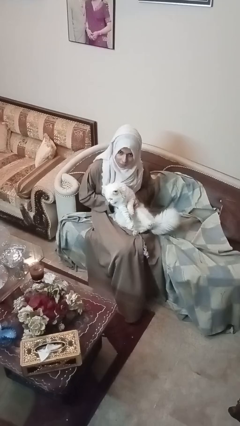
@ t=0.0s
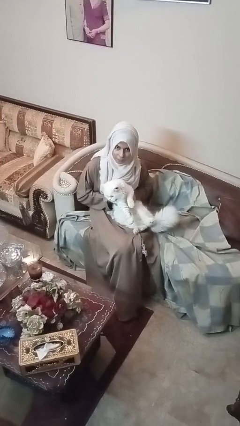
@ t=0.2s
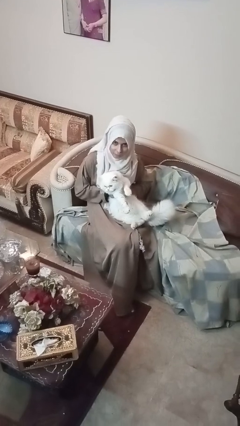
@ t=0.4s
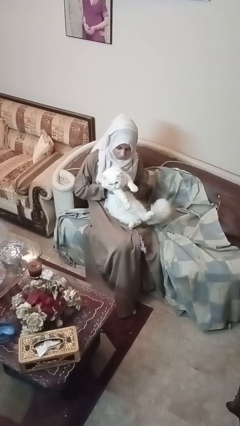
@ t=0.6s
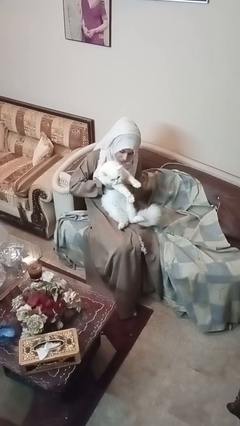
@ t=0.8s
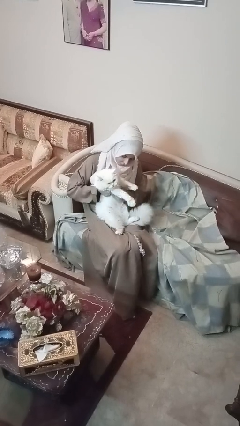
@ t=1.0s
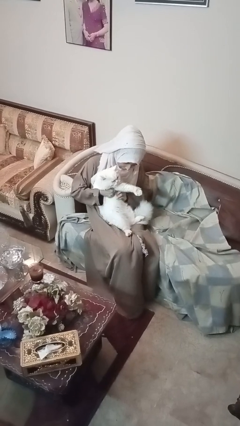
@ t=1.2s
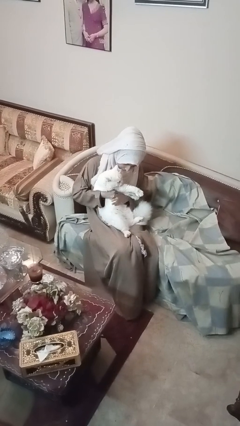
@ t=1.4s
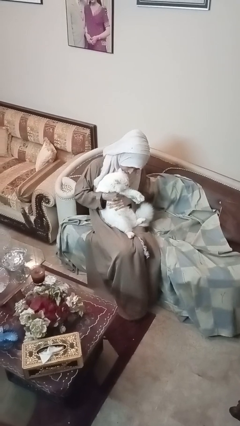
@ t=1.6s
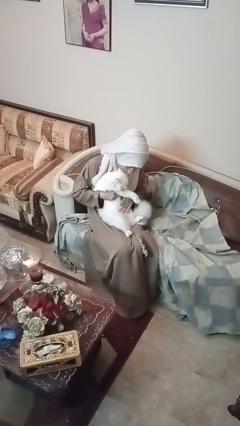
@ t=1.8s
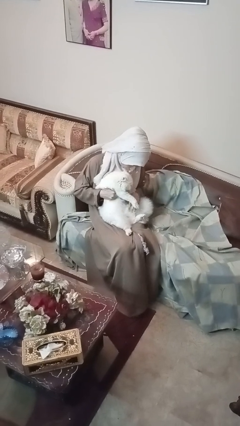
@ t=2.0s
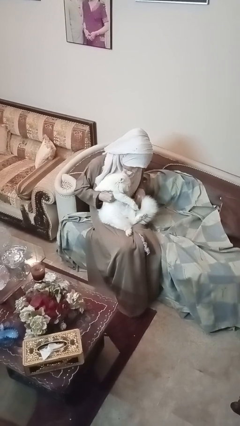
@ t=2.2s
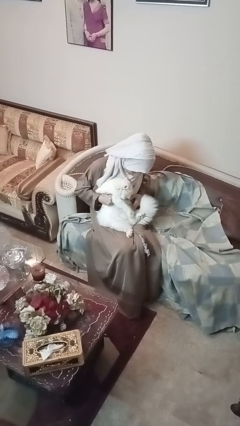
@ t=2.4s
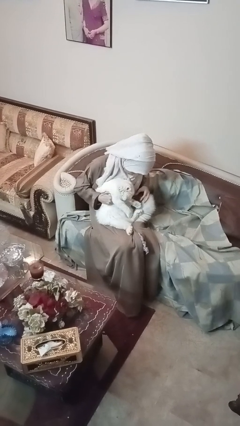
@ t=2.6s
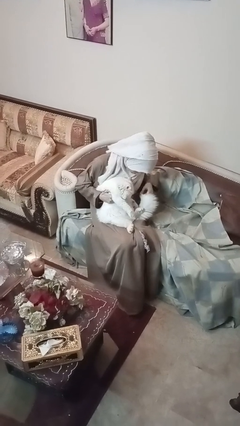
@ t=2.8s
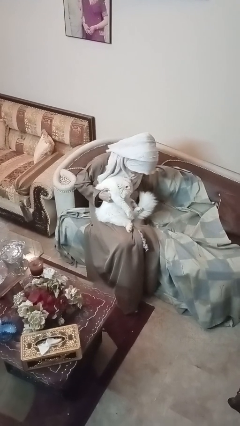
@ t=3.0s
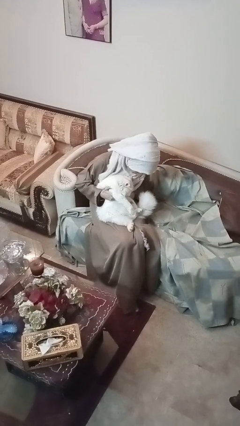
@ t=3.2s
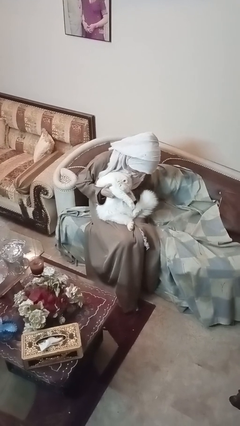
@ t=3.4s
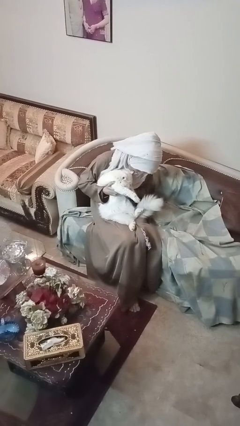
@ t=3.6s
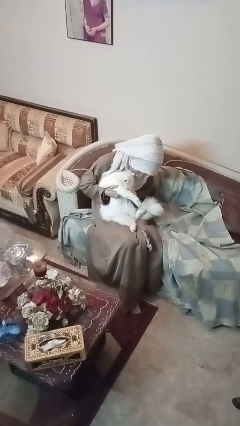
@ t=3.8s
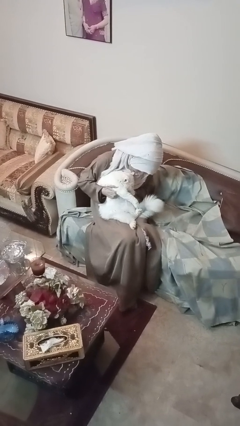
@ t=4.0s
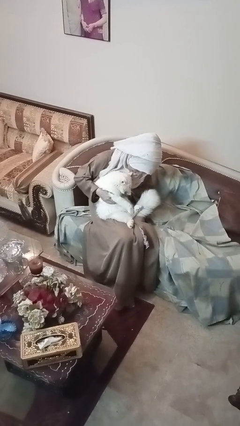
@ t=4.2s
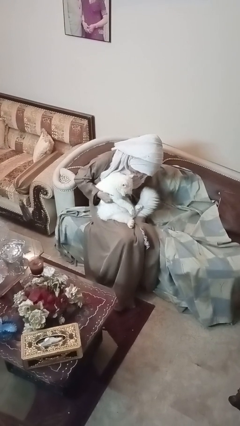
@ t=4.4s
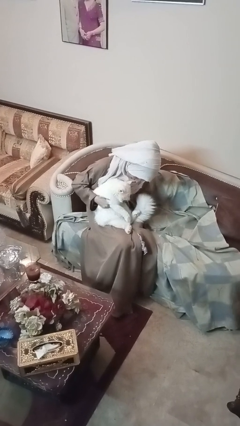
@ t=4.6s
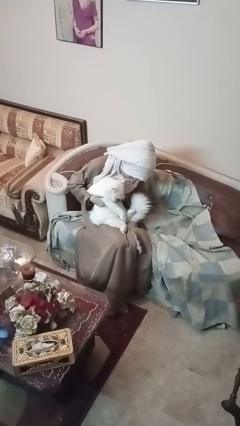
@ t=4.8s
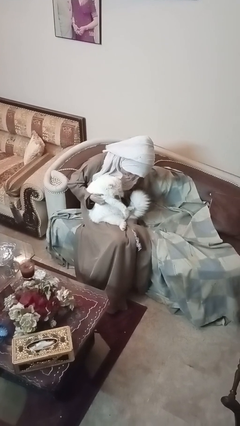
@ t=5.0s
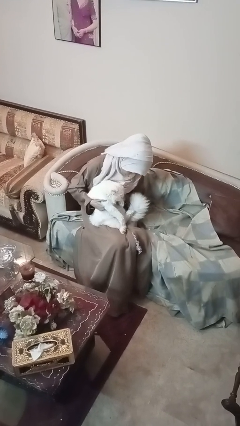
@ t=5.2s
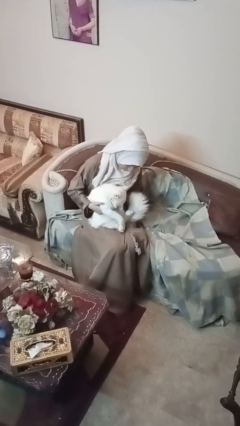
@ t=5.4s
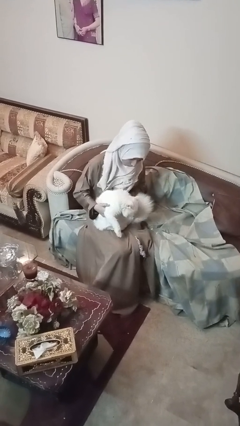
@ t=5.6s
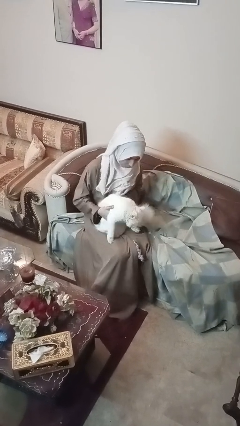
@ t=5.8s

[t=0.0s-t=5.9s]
person hugs cat

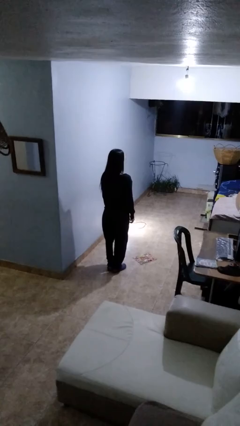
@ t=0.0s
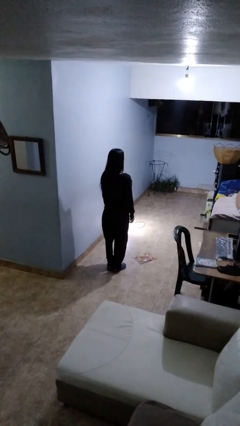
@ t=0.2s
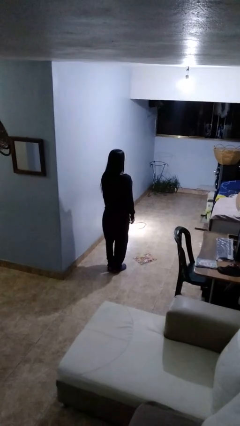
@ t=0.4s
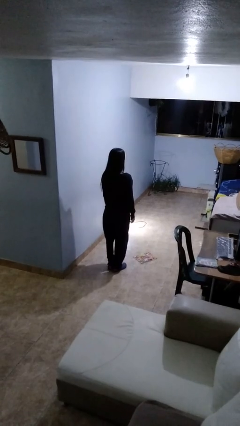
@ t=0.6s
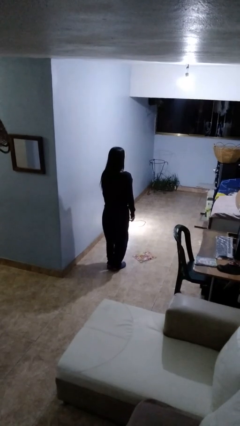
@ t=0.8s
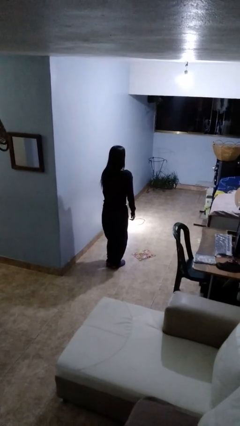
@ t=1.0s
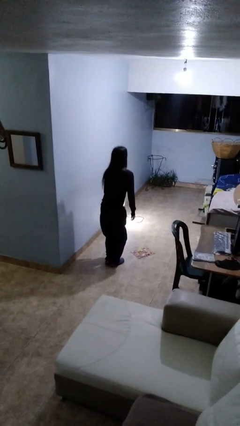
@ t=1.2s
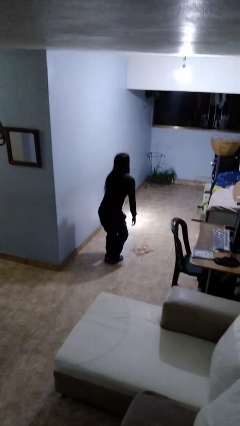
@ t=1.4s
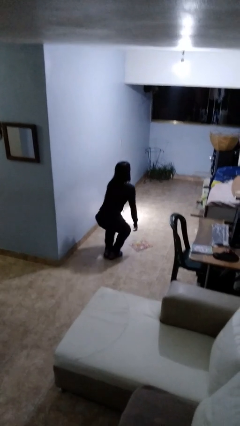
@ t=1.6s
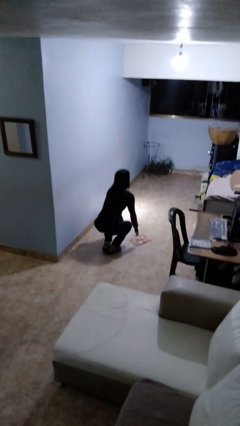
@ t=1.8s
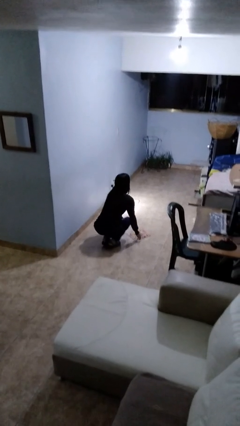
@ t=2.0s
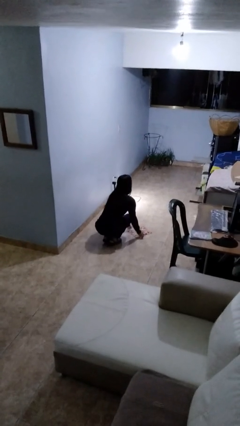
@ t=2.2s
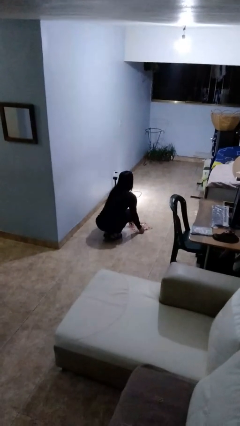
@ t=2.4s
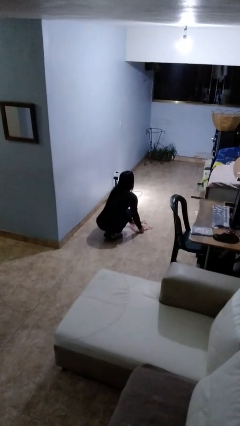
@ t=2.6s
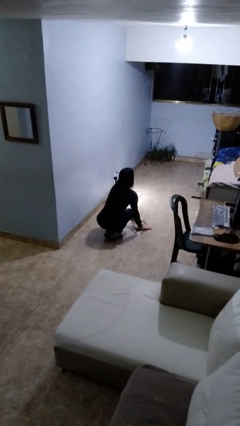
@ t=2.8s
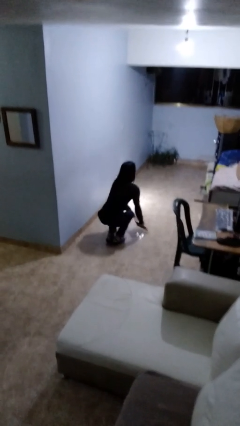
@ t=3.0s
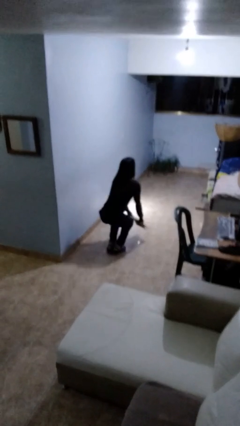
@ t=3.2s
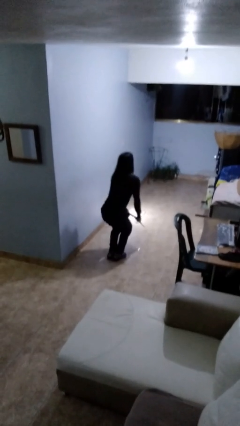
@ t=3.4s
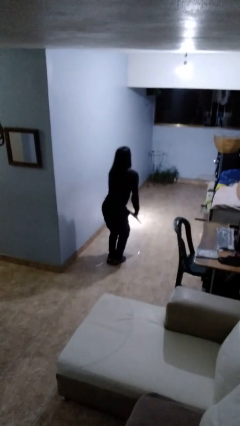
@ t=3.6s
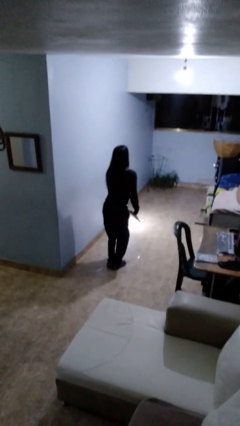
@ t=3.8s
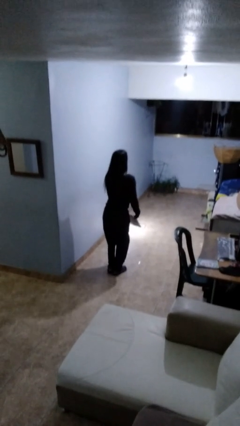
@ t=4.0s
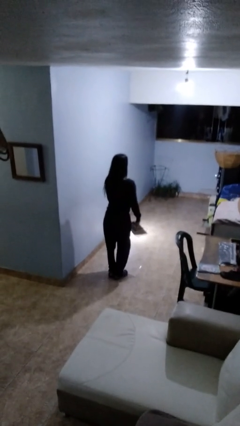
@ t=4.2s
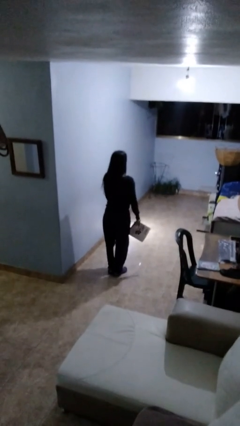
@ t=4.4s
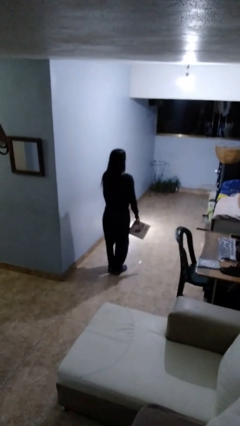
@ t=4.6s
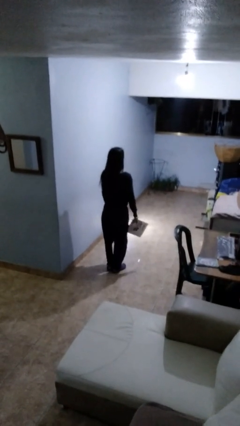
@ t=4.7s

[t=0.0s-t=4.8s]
person picks up object from floor

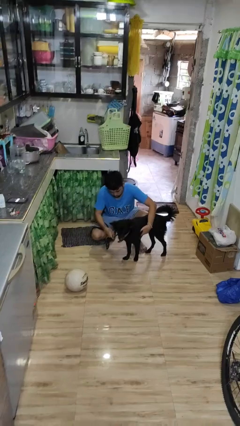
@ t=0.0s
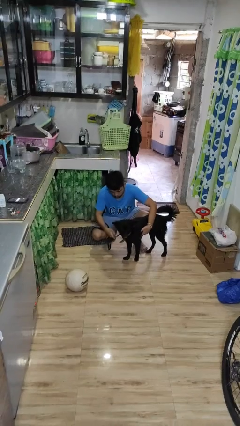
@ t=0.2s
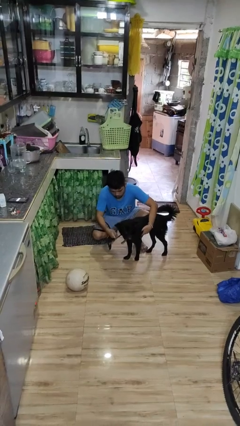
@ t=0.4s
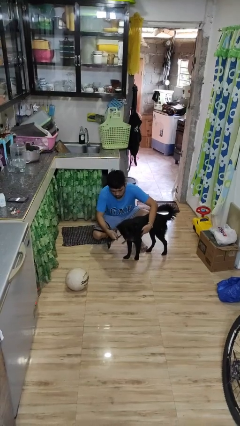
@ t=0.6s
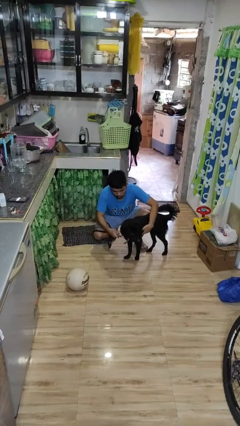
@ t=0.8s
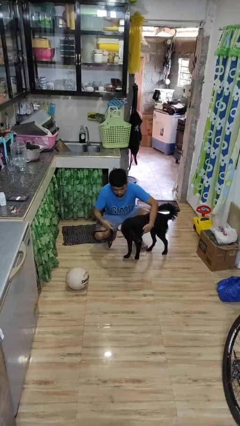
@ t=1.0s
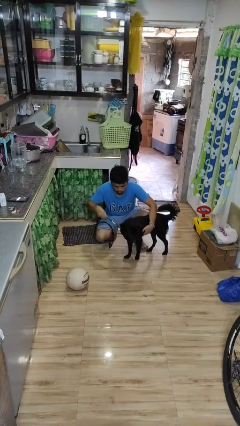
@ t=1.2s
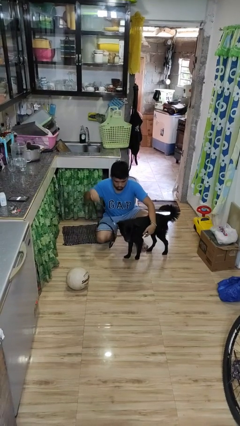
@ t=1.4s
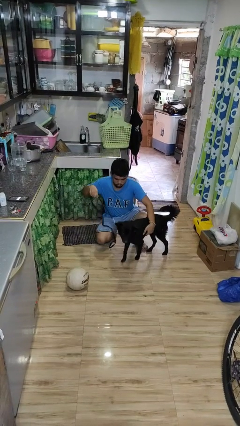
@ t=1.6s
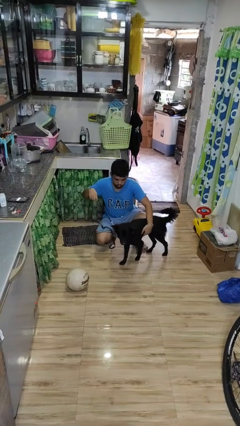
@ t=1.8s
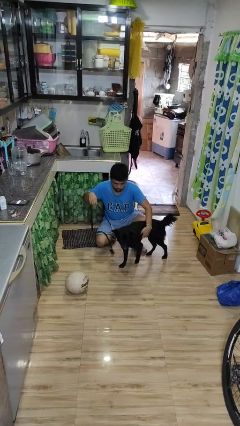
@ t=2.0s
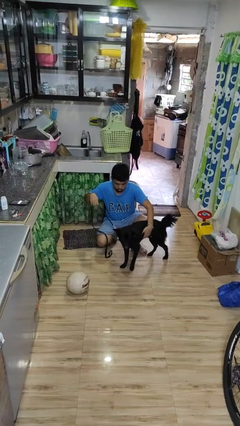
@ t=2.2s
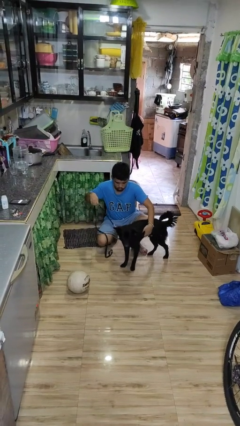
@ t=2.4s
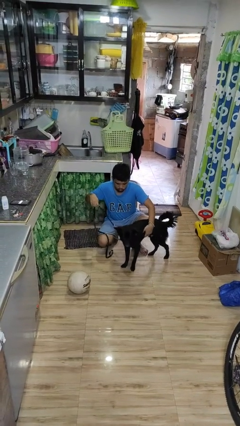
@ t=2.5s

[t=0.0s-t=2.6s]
person attaches leash to dog

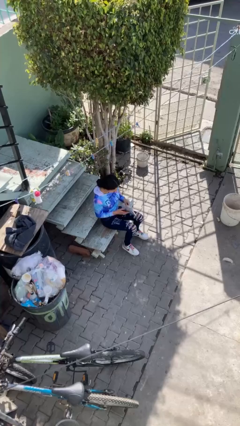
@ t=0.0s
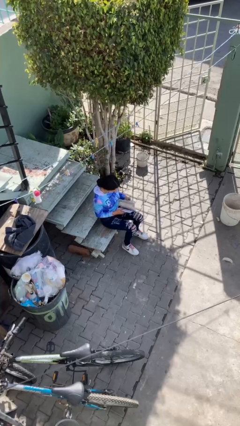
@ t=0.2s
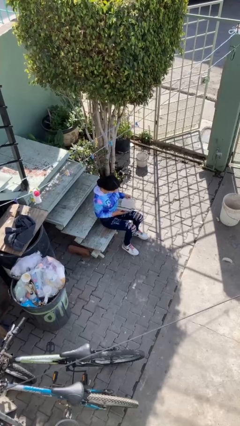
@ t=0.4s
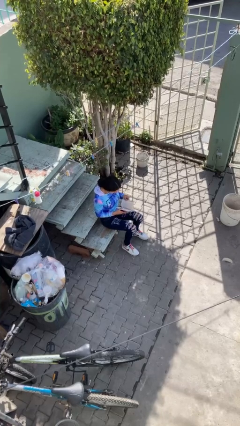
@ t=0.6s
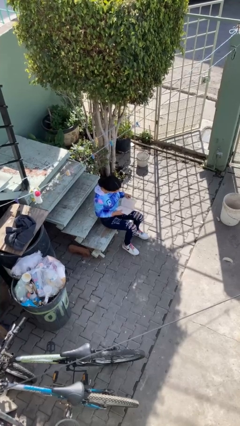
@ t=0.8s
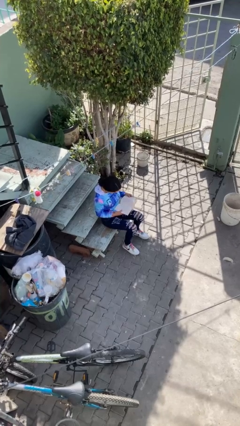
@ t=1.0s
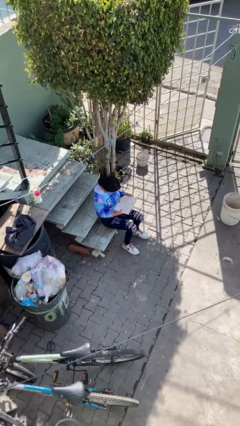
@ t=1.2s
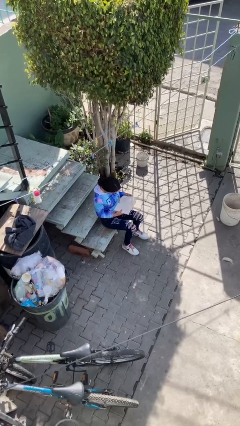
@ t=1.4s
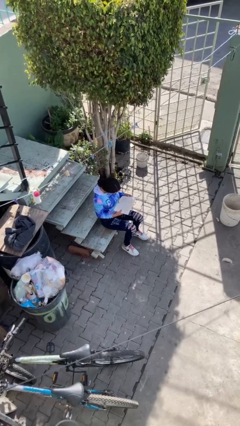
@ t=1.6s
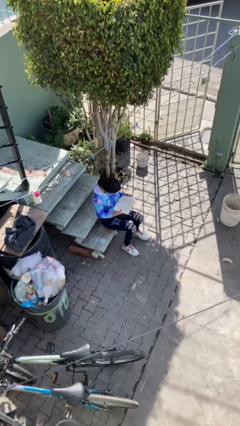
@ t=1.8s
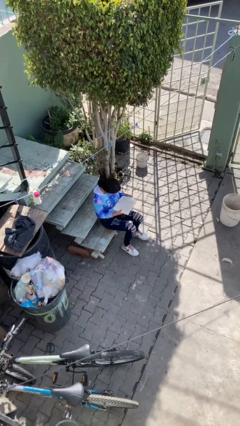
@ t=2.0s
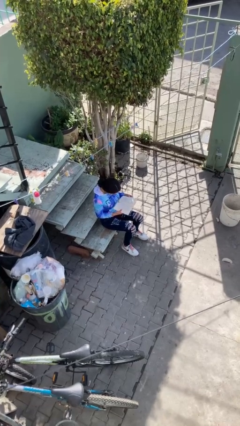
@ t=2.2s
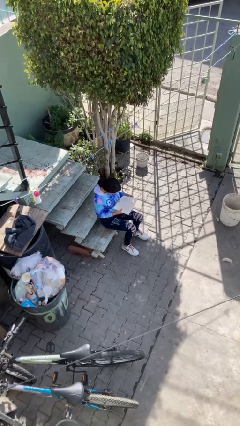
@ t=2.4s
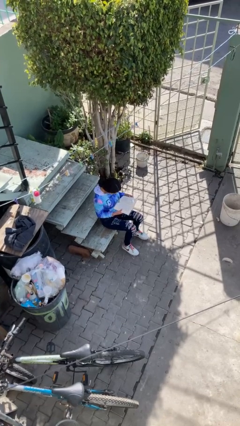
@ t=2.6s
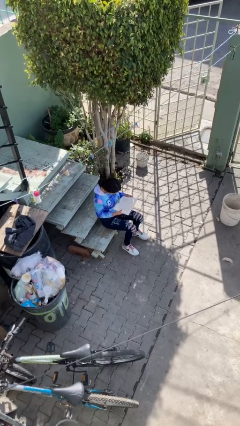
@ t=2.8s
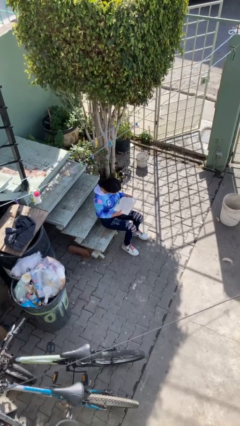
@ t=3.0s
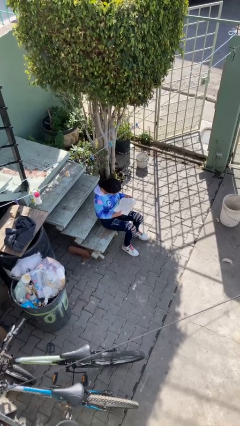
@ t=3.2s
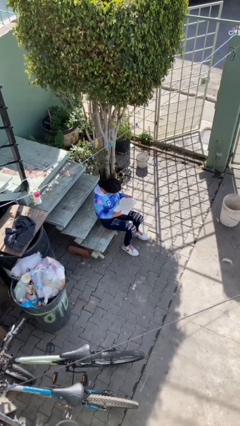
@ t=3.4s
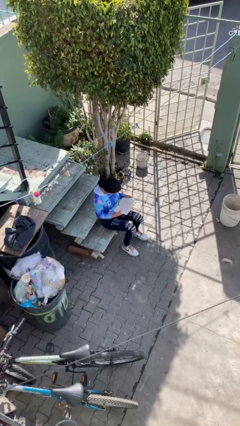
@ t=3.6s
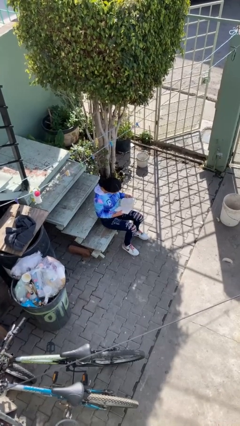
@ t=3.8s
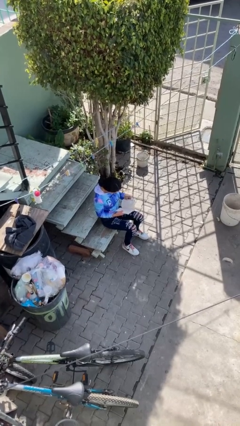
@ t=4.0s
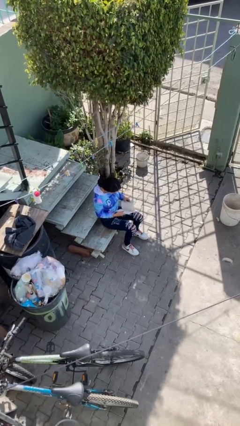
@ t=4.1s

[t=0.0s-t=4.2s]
person reads document
